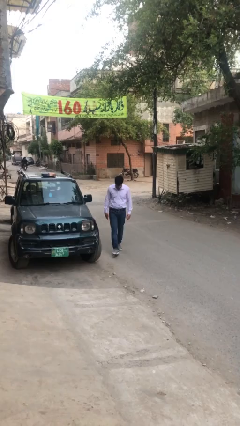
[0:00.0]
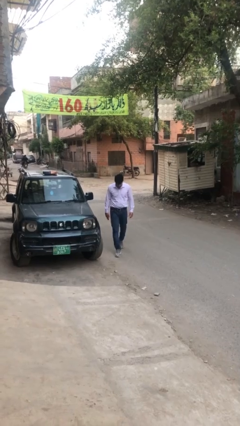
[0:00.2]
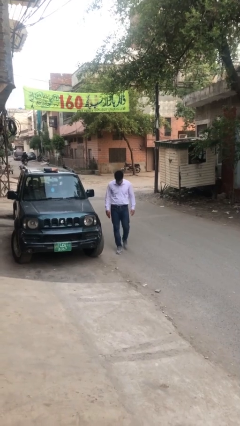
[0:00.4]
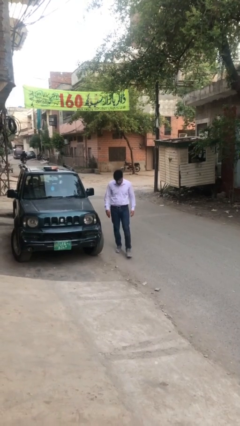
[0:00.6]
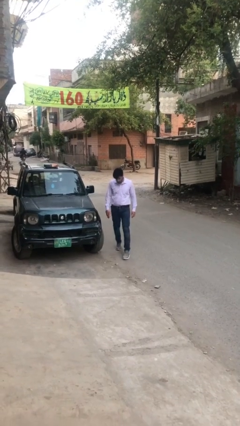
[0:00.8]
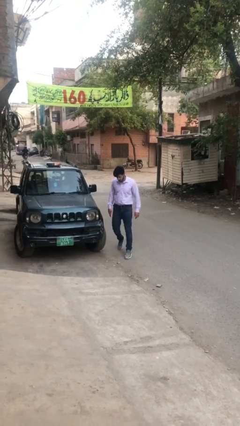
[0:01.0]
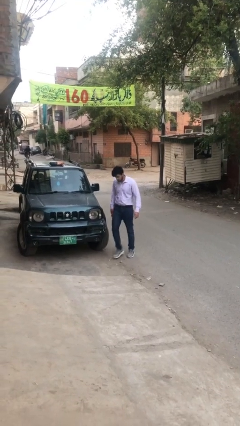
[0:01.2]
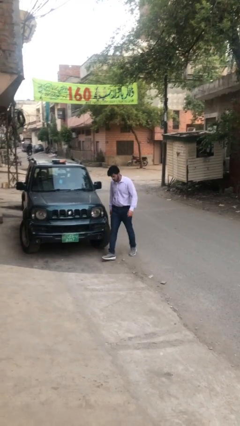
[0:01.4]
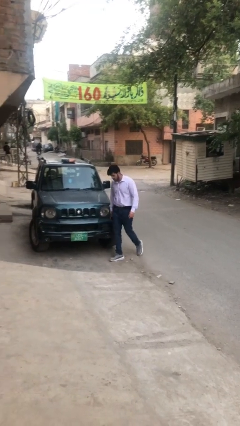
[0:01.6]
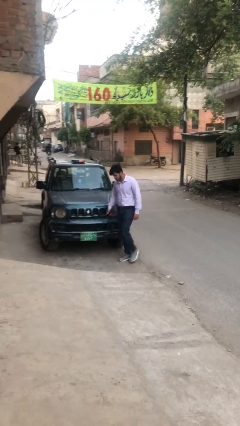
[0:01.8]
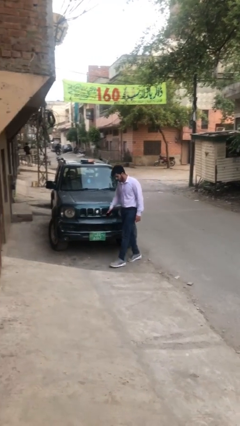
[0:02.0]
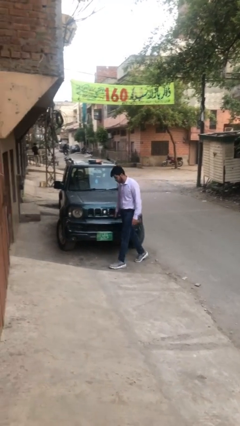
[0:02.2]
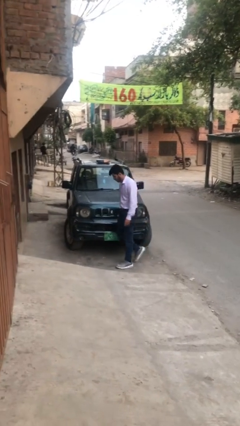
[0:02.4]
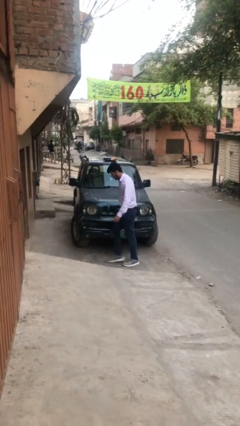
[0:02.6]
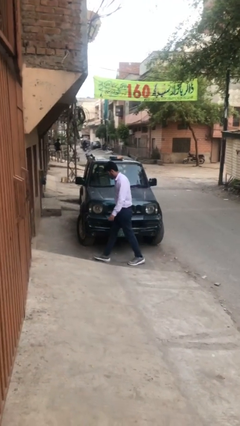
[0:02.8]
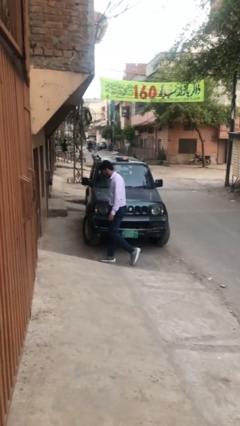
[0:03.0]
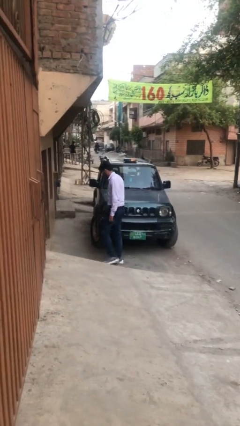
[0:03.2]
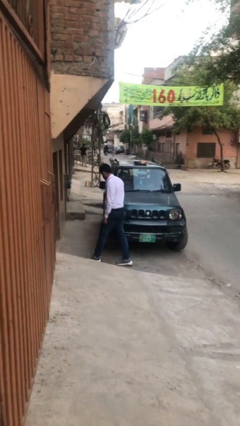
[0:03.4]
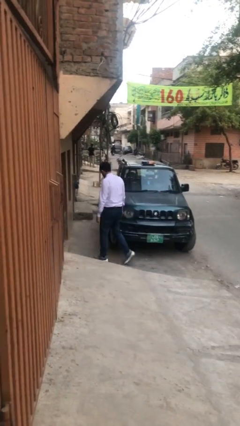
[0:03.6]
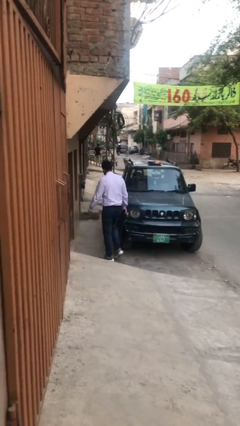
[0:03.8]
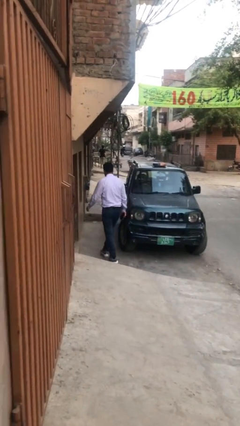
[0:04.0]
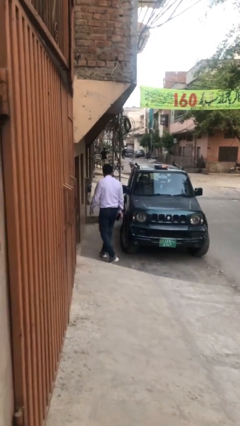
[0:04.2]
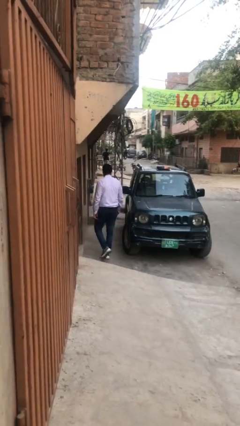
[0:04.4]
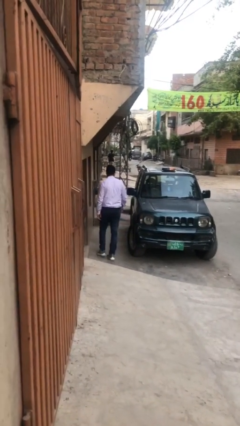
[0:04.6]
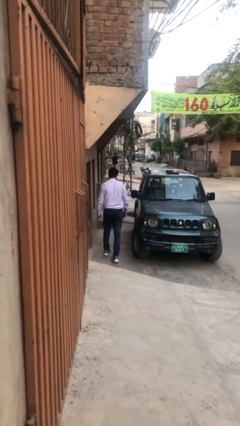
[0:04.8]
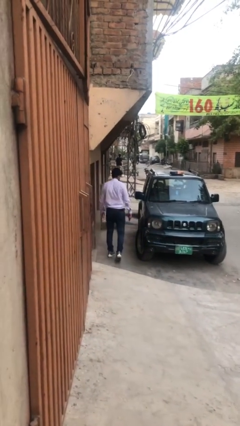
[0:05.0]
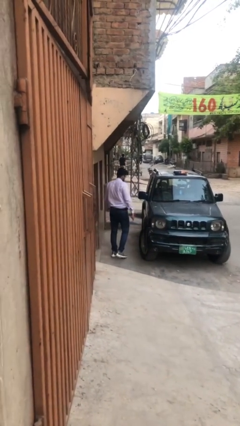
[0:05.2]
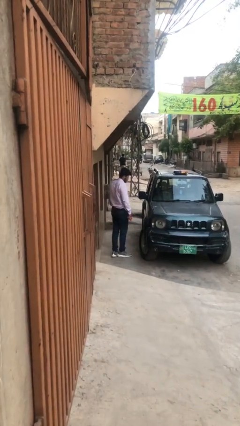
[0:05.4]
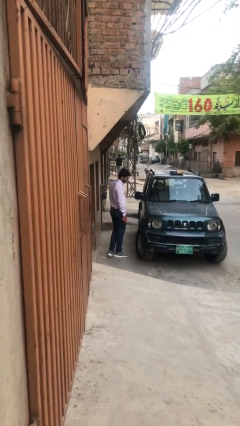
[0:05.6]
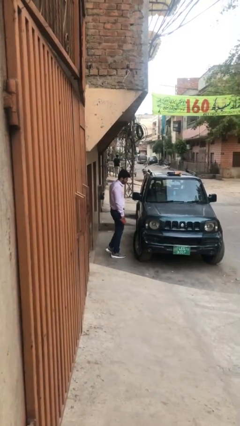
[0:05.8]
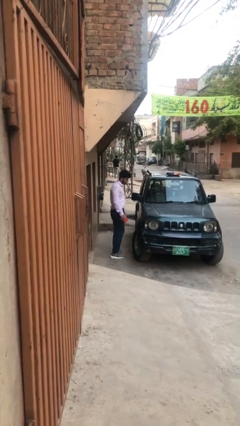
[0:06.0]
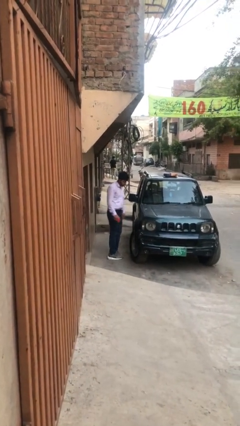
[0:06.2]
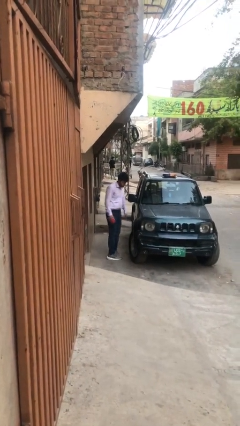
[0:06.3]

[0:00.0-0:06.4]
person walks around car

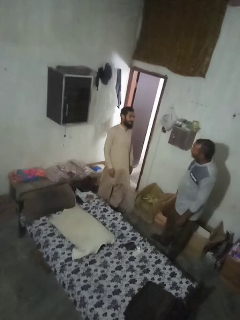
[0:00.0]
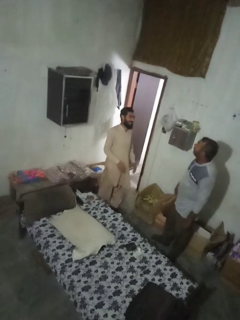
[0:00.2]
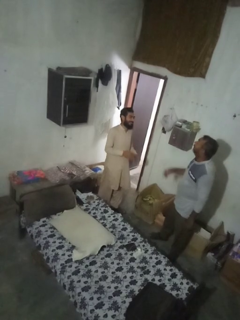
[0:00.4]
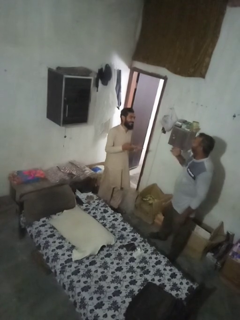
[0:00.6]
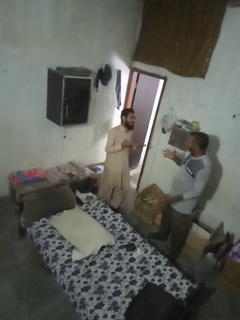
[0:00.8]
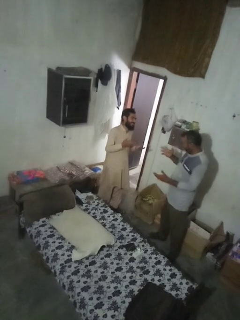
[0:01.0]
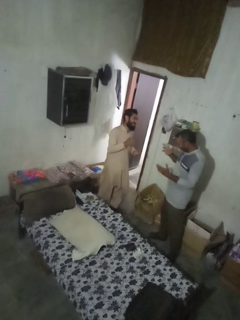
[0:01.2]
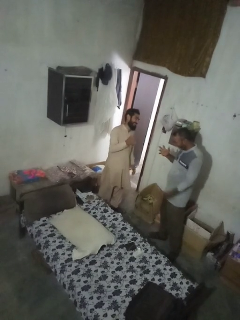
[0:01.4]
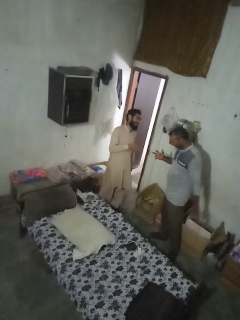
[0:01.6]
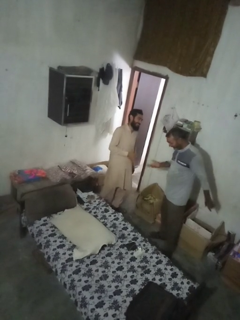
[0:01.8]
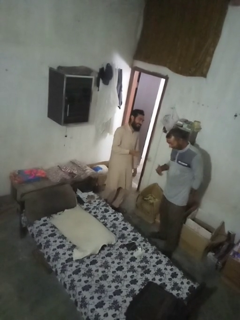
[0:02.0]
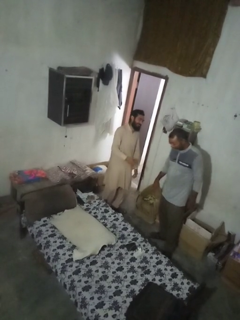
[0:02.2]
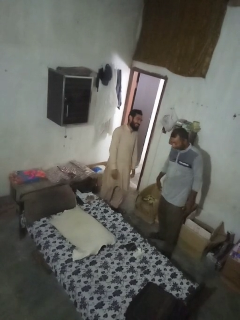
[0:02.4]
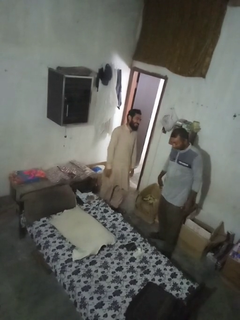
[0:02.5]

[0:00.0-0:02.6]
person laughs with person

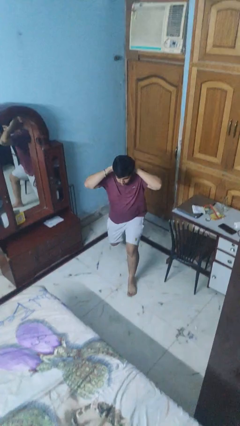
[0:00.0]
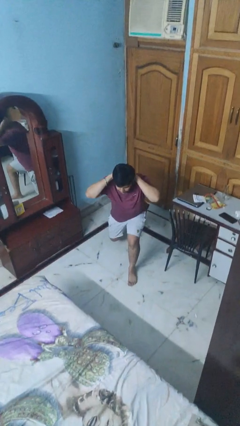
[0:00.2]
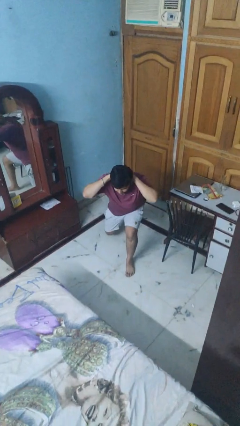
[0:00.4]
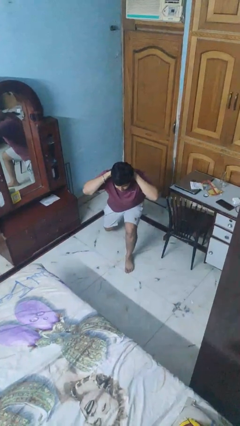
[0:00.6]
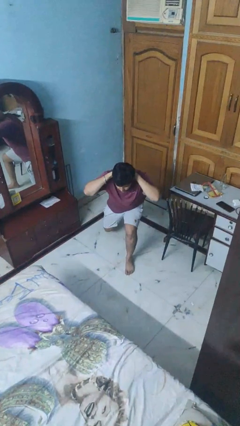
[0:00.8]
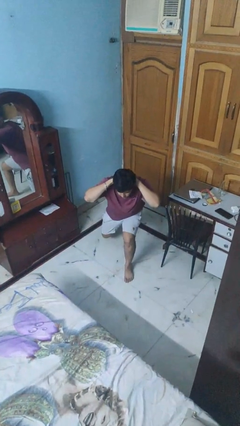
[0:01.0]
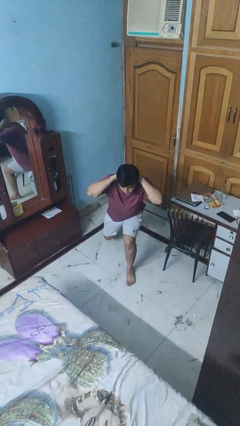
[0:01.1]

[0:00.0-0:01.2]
person exercises with lunges

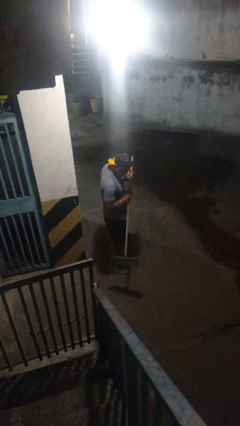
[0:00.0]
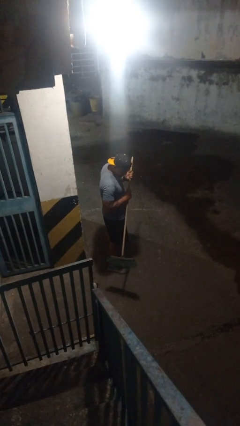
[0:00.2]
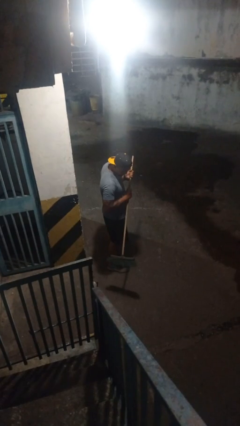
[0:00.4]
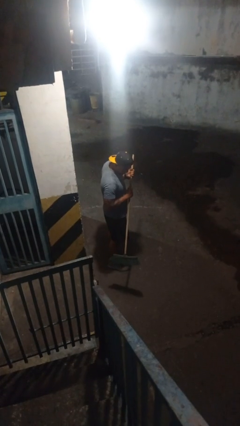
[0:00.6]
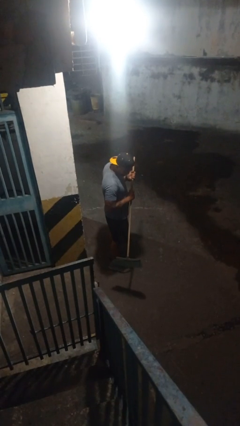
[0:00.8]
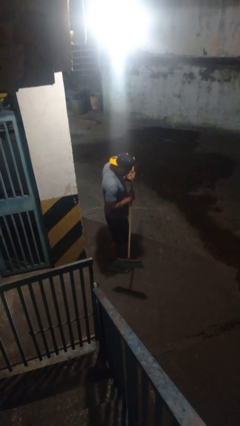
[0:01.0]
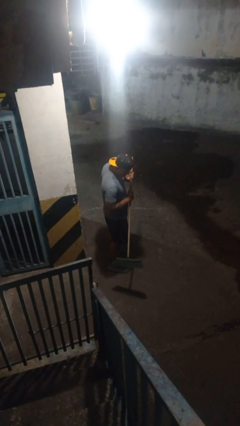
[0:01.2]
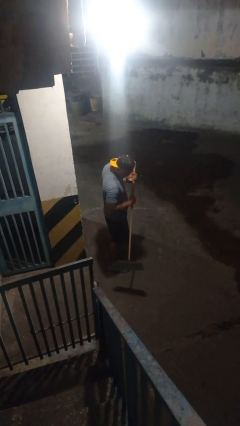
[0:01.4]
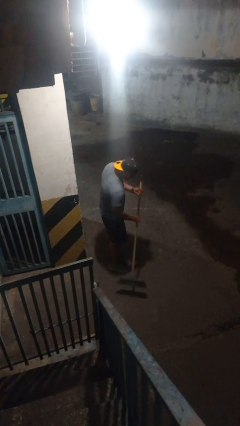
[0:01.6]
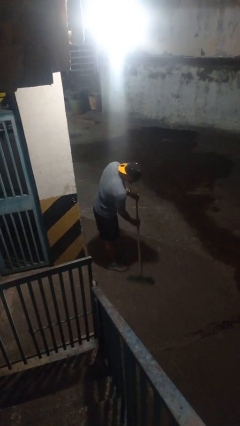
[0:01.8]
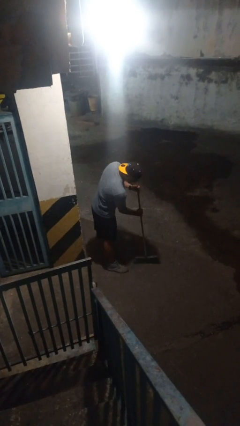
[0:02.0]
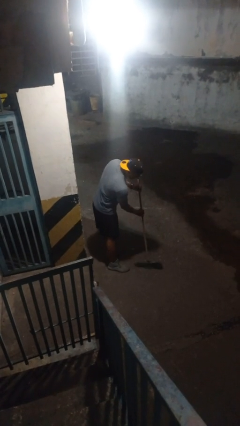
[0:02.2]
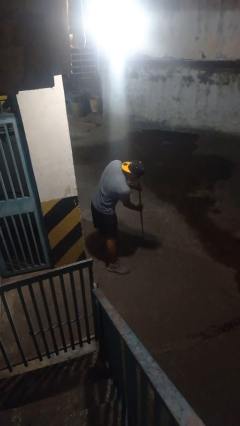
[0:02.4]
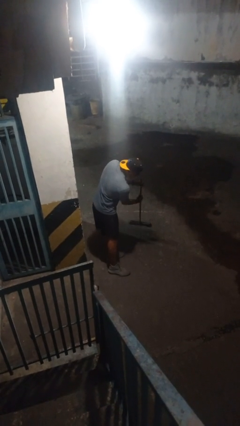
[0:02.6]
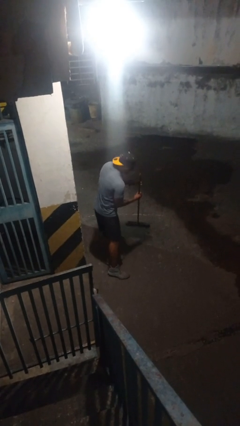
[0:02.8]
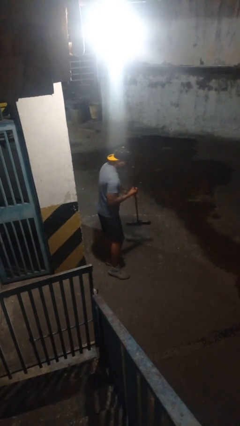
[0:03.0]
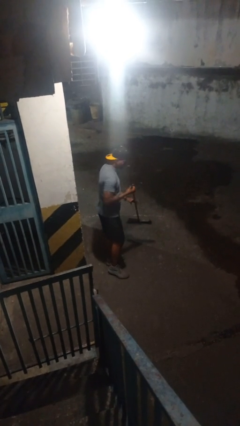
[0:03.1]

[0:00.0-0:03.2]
person sweeps floor

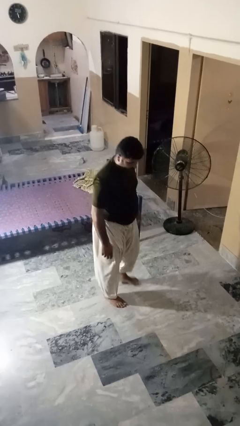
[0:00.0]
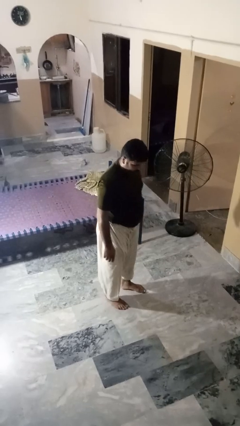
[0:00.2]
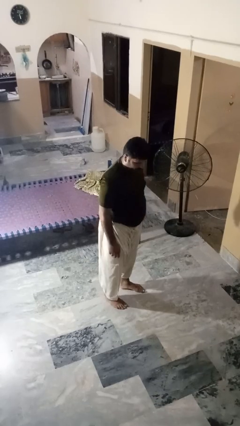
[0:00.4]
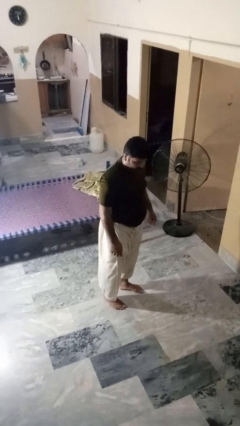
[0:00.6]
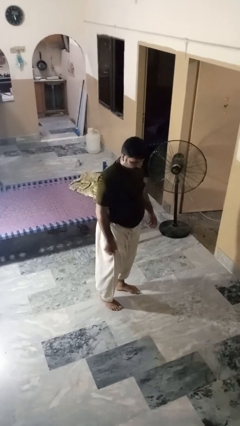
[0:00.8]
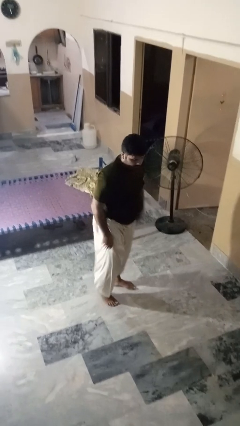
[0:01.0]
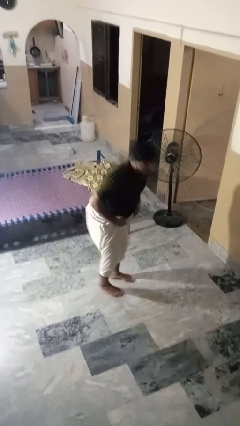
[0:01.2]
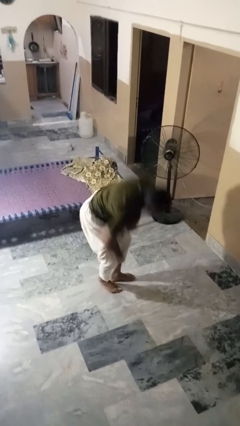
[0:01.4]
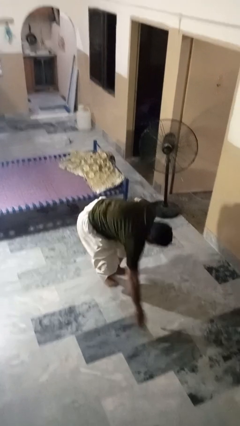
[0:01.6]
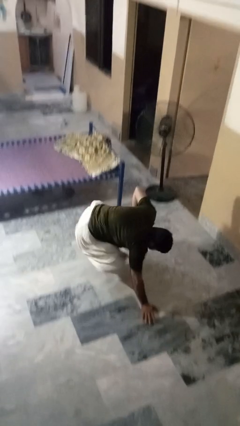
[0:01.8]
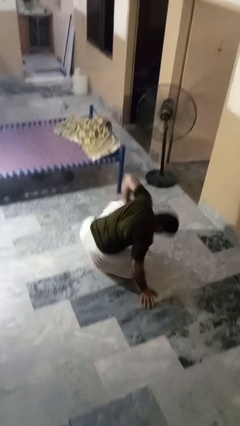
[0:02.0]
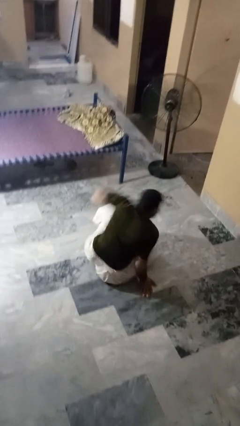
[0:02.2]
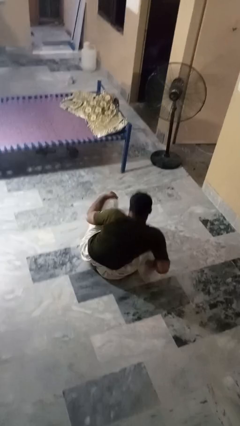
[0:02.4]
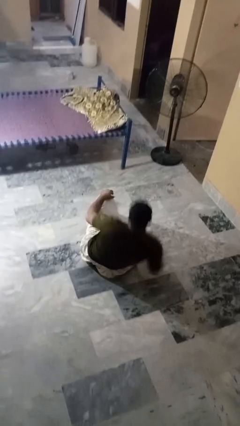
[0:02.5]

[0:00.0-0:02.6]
person falls while standing

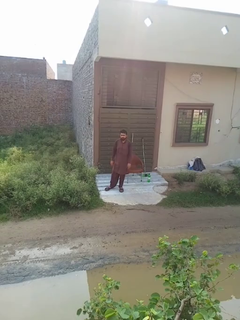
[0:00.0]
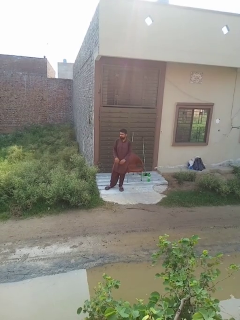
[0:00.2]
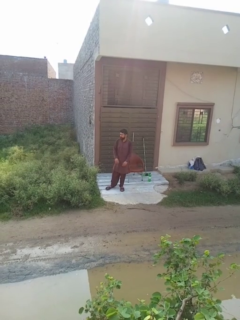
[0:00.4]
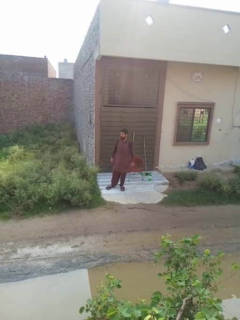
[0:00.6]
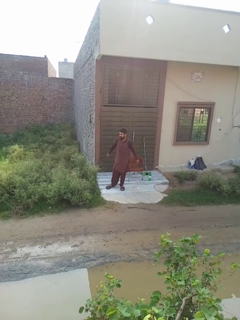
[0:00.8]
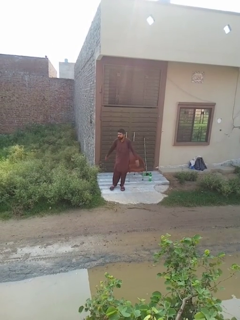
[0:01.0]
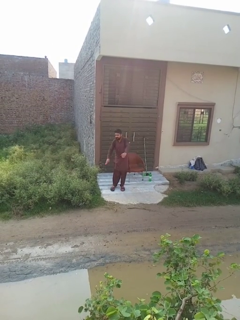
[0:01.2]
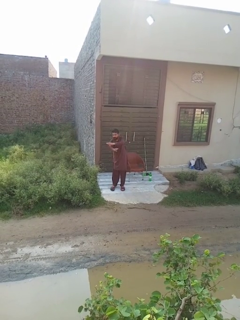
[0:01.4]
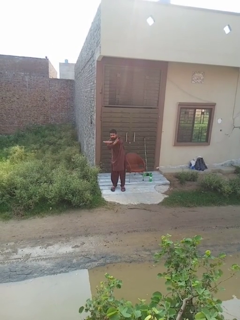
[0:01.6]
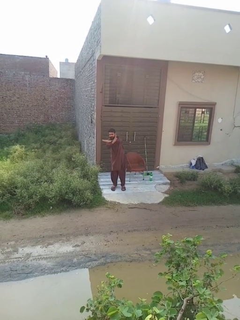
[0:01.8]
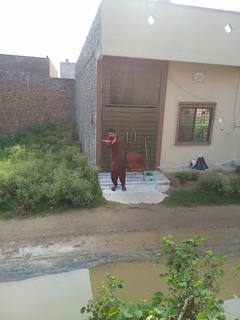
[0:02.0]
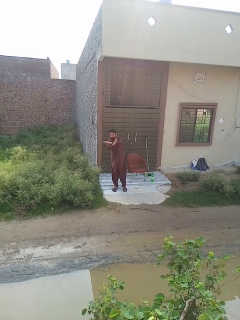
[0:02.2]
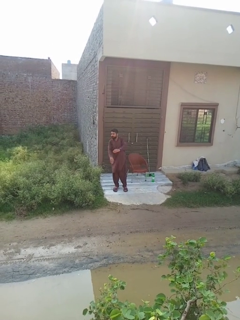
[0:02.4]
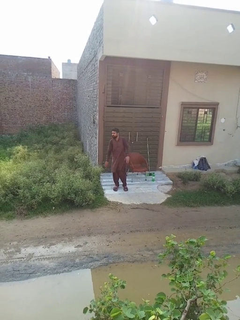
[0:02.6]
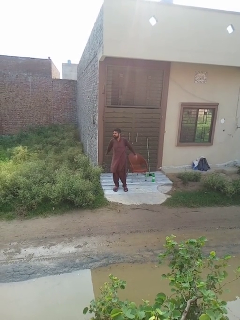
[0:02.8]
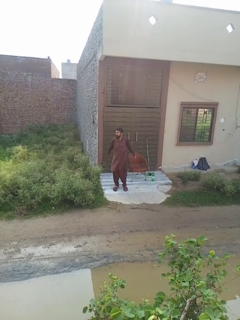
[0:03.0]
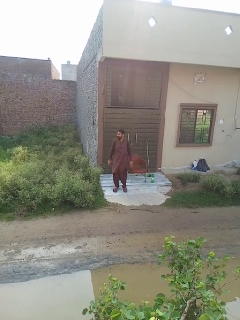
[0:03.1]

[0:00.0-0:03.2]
person crosses arms
